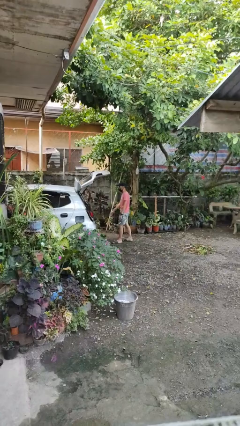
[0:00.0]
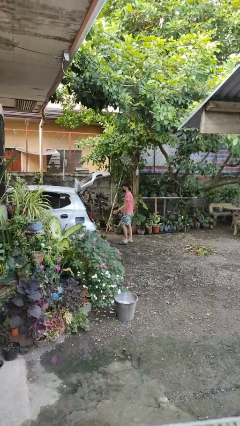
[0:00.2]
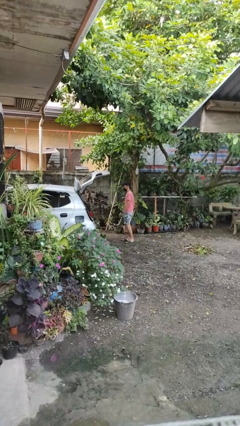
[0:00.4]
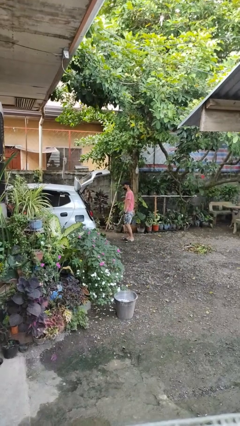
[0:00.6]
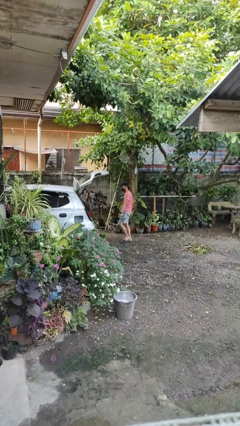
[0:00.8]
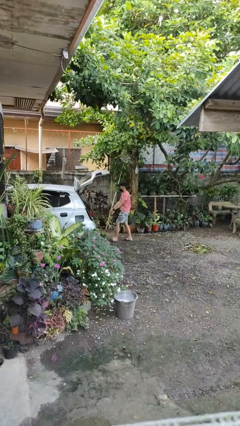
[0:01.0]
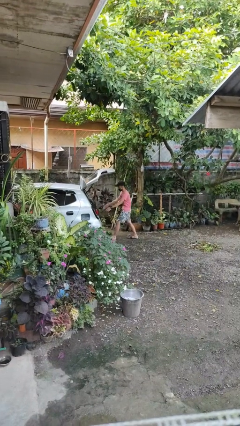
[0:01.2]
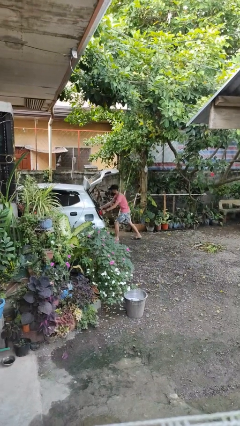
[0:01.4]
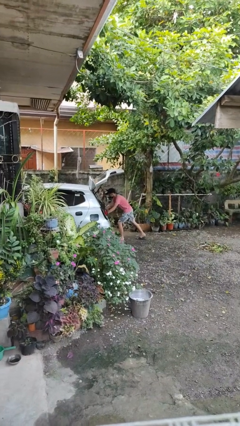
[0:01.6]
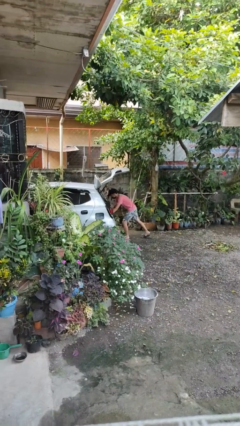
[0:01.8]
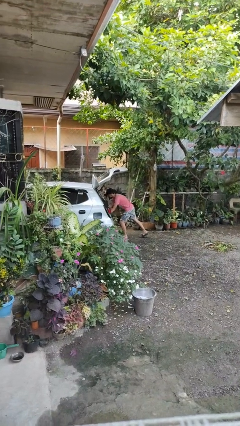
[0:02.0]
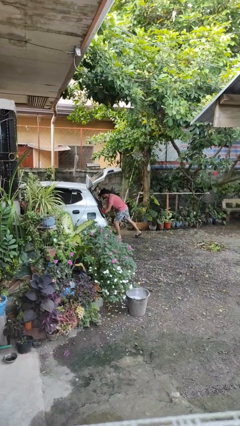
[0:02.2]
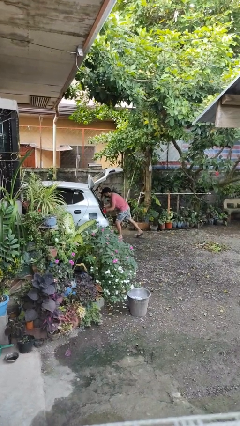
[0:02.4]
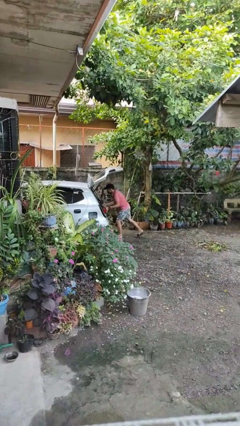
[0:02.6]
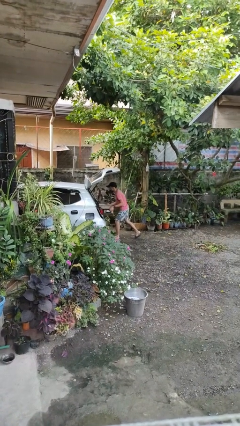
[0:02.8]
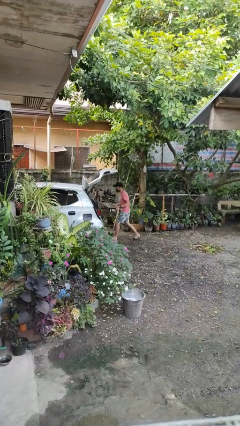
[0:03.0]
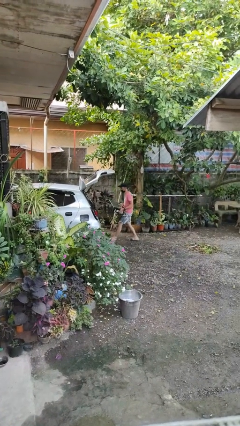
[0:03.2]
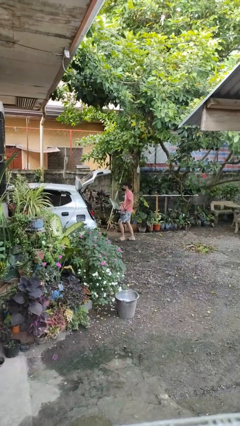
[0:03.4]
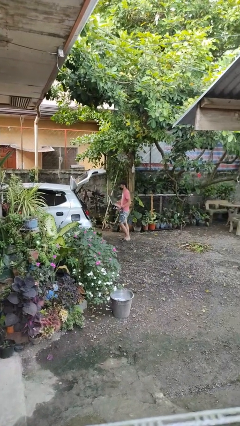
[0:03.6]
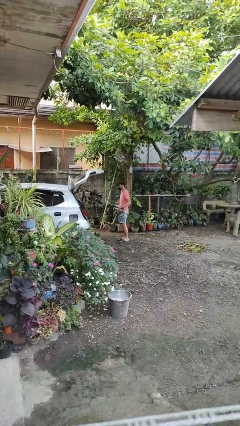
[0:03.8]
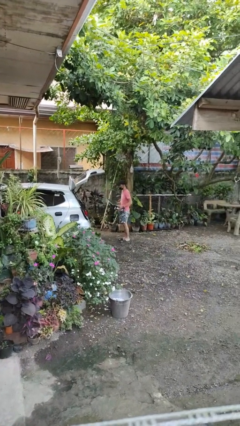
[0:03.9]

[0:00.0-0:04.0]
person unloads car

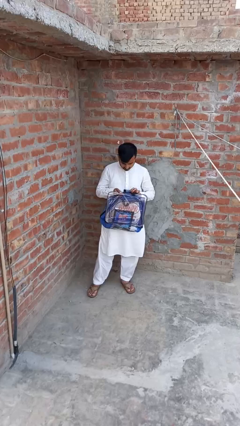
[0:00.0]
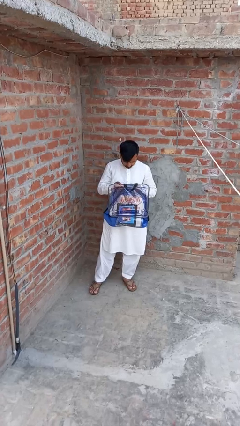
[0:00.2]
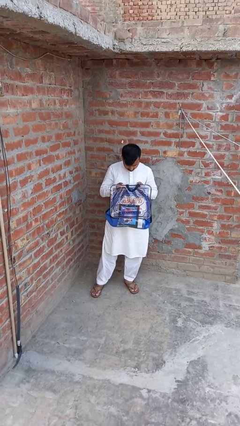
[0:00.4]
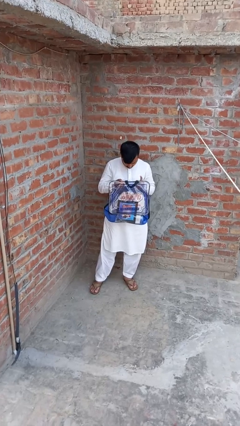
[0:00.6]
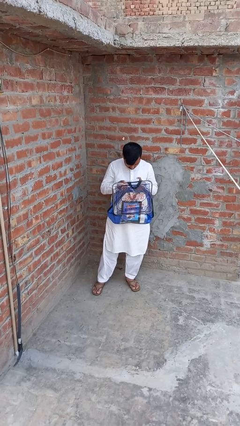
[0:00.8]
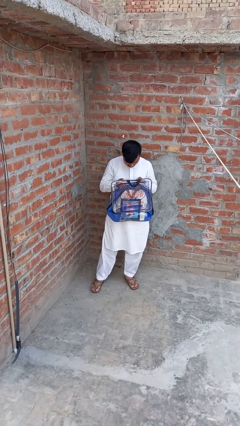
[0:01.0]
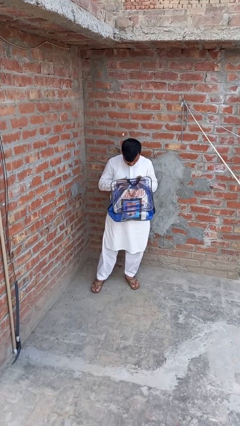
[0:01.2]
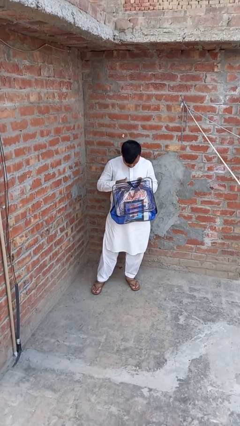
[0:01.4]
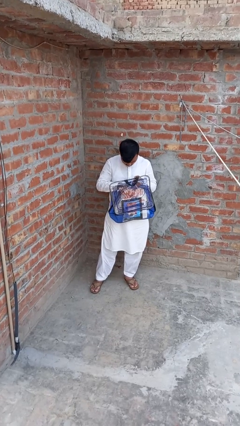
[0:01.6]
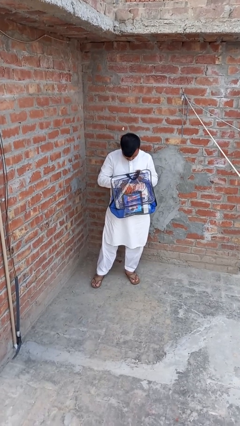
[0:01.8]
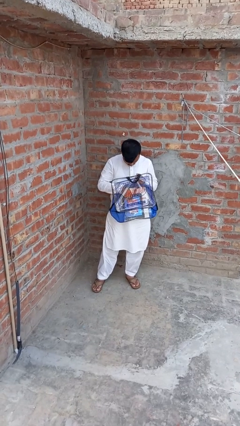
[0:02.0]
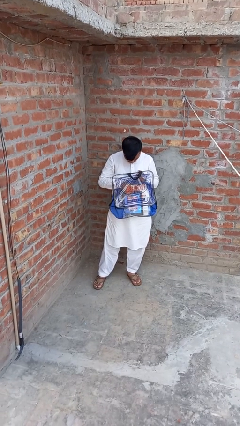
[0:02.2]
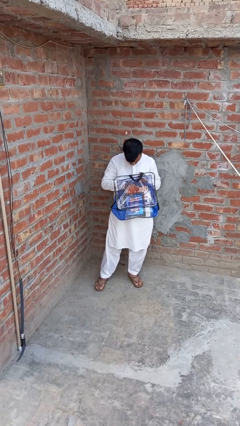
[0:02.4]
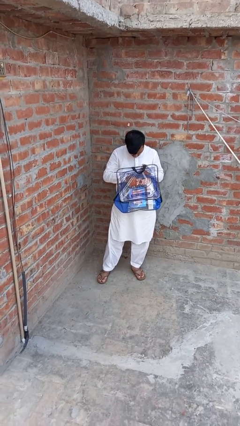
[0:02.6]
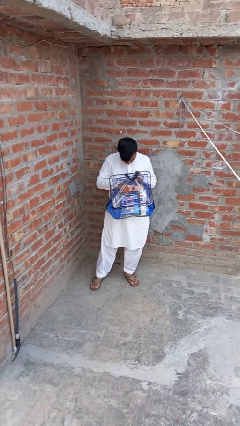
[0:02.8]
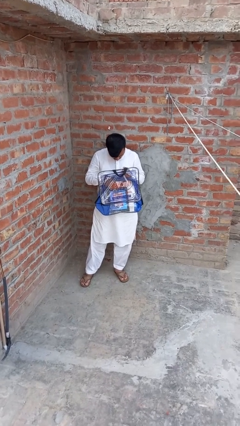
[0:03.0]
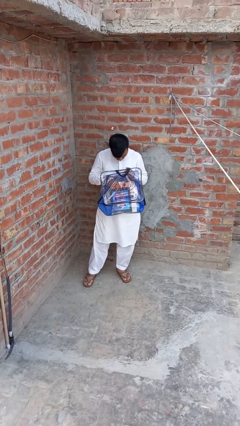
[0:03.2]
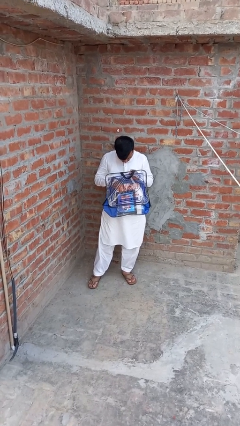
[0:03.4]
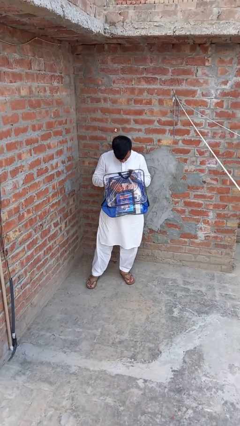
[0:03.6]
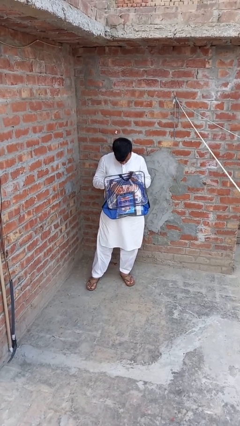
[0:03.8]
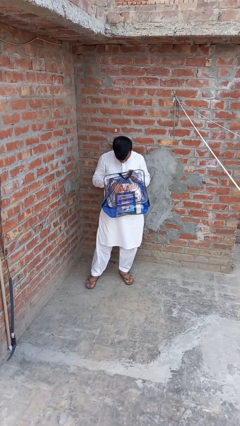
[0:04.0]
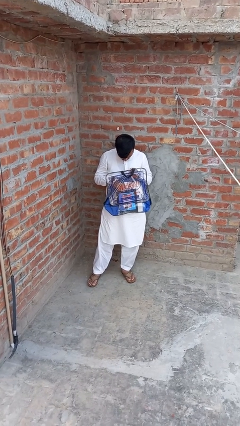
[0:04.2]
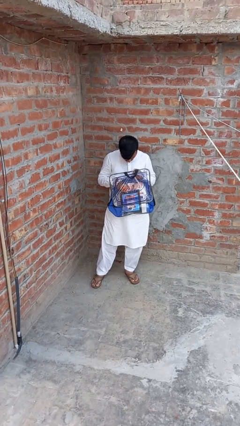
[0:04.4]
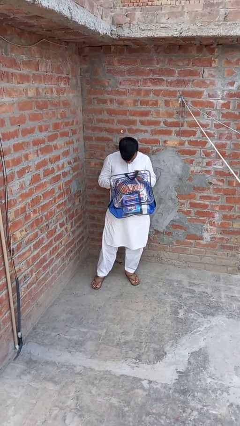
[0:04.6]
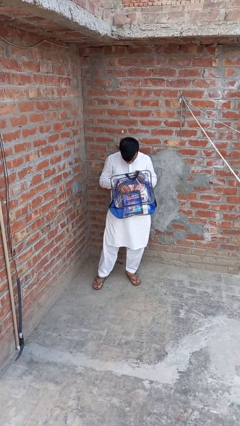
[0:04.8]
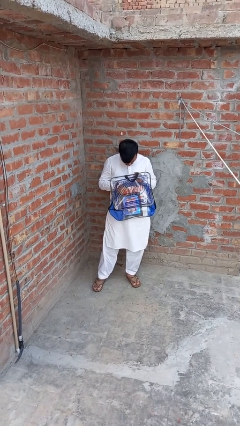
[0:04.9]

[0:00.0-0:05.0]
person searches in backpack

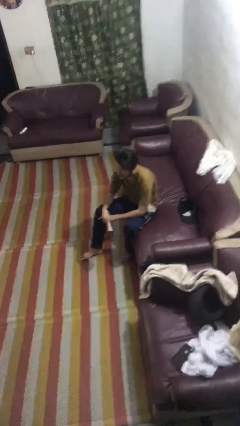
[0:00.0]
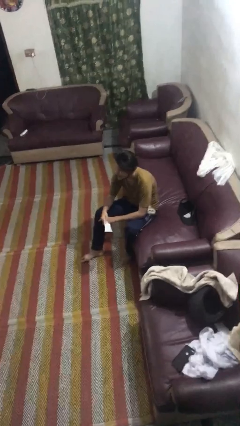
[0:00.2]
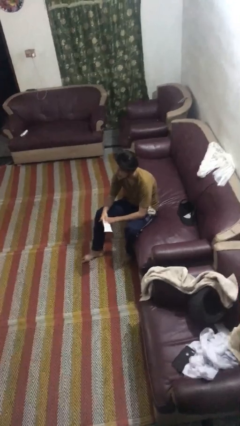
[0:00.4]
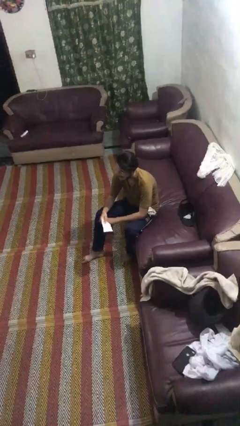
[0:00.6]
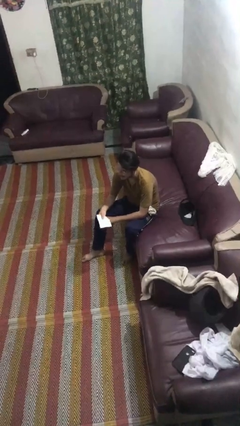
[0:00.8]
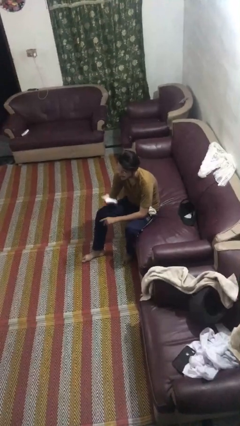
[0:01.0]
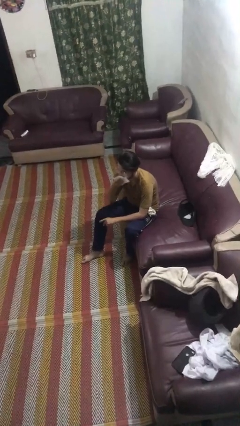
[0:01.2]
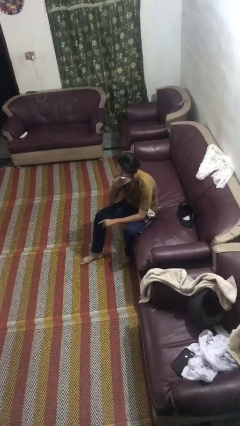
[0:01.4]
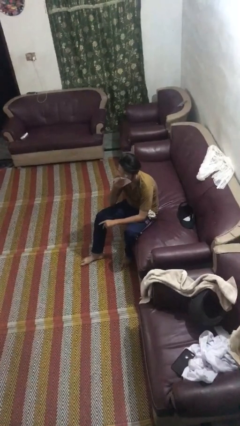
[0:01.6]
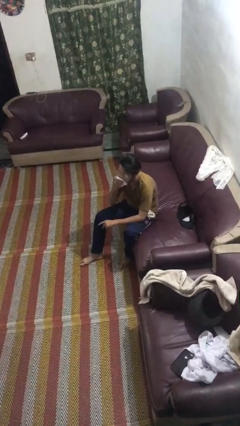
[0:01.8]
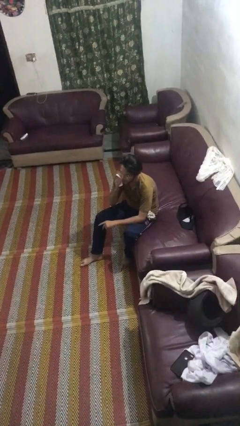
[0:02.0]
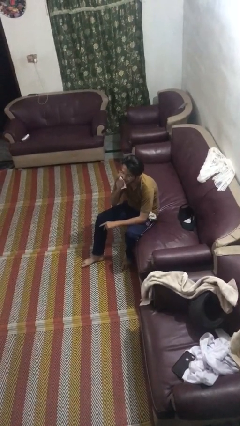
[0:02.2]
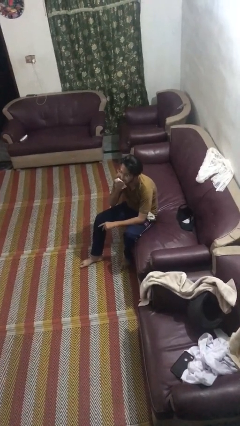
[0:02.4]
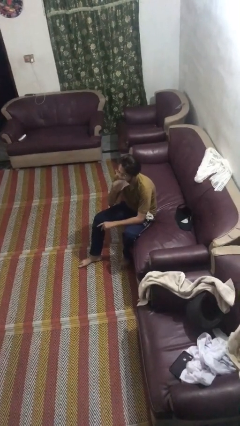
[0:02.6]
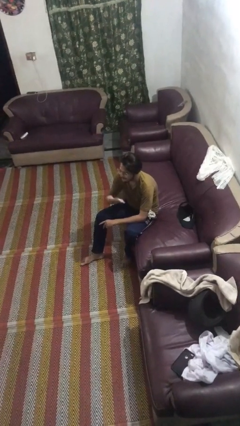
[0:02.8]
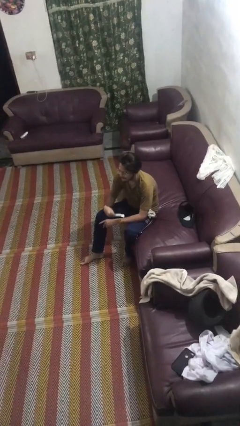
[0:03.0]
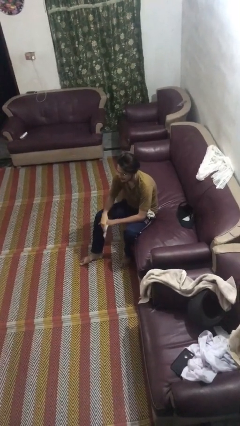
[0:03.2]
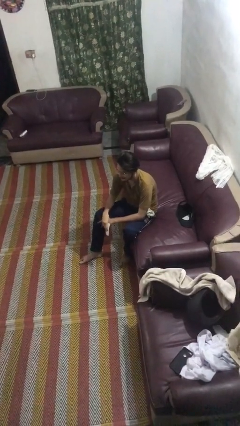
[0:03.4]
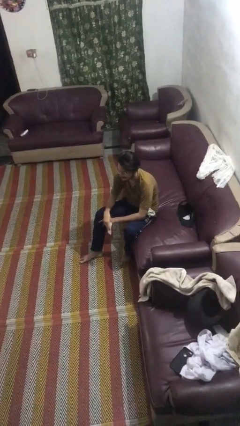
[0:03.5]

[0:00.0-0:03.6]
person wipes mouth with napkin

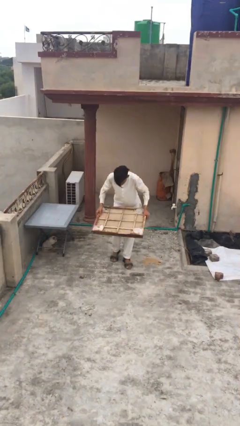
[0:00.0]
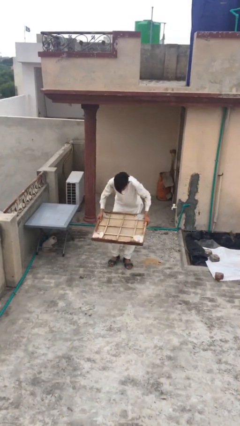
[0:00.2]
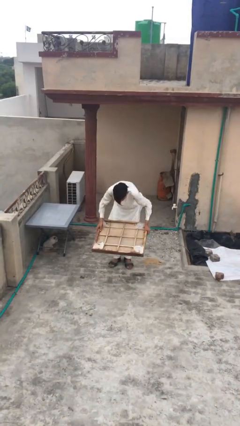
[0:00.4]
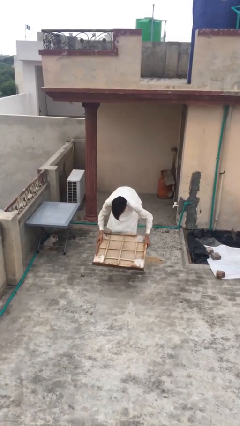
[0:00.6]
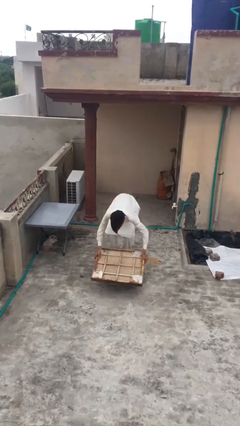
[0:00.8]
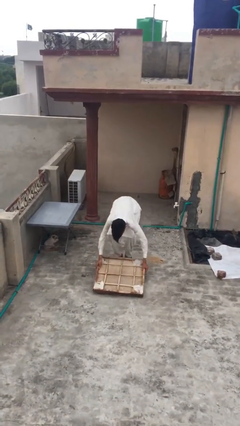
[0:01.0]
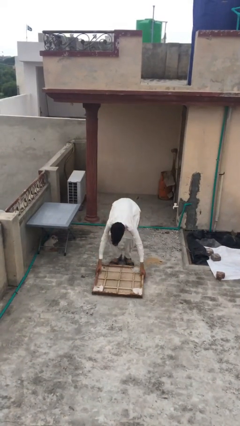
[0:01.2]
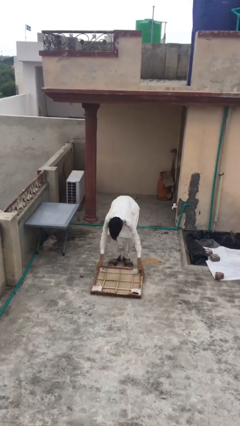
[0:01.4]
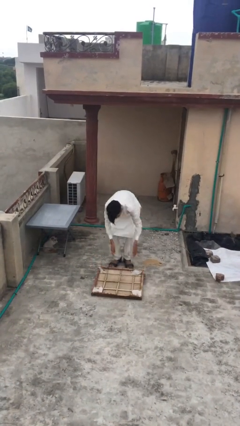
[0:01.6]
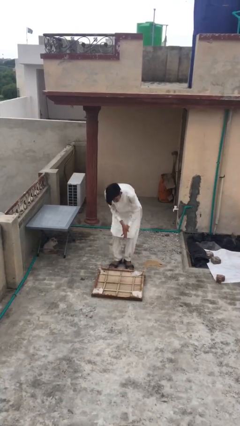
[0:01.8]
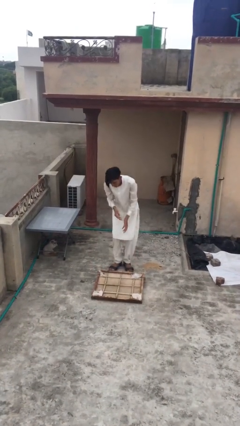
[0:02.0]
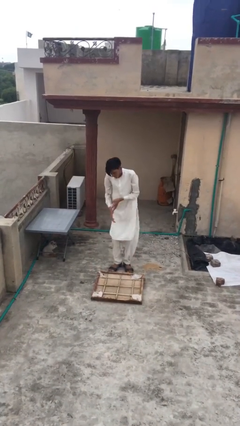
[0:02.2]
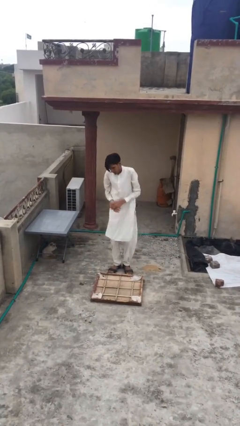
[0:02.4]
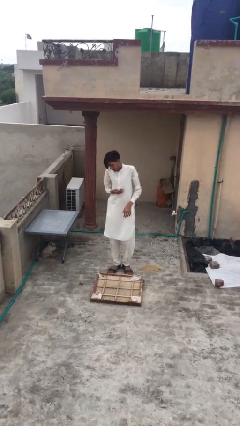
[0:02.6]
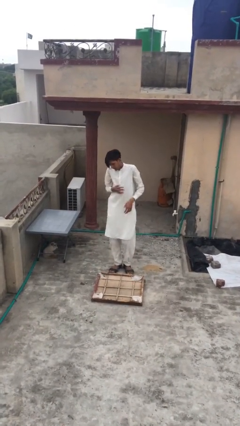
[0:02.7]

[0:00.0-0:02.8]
person puts down object on floor

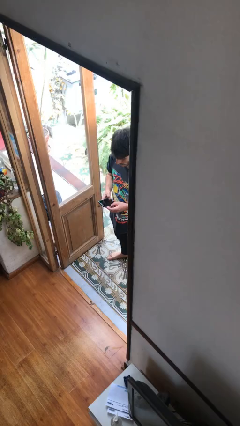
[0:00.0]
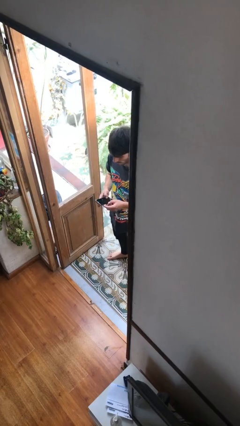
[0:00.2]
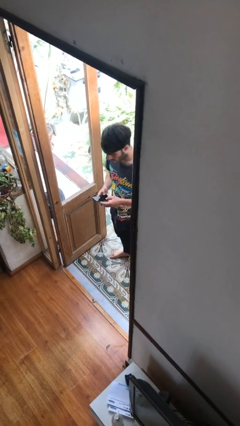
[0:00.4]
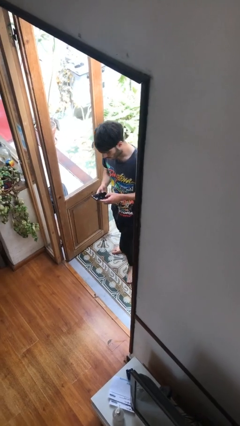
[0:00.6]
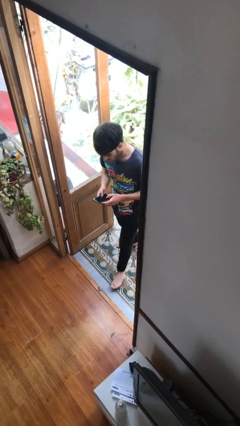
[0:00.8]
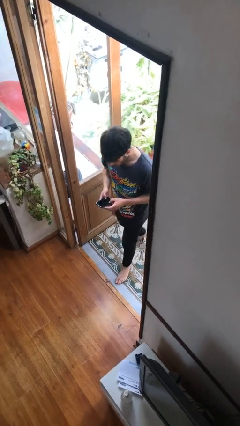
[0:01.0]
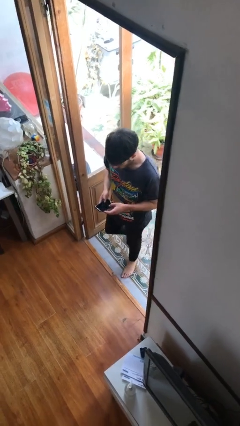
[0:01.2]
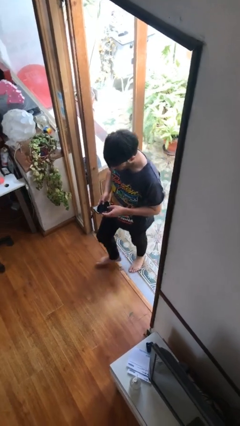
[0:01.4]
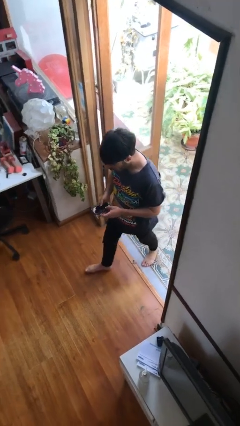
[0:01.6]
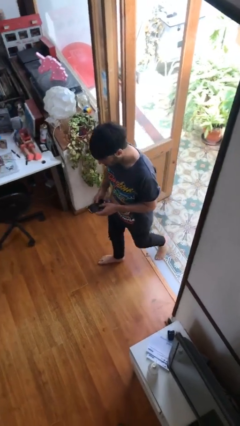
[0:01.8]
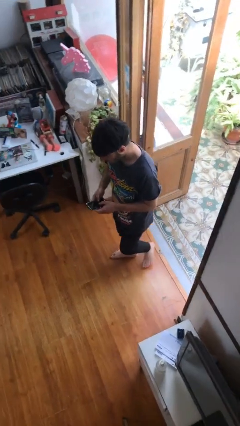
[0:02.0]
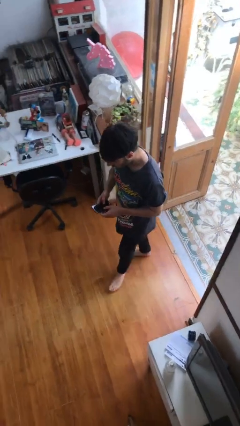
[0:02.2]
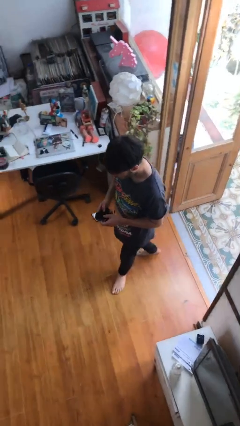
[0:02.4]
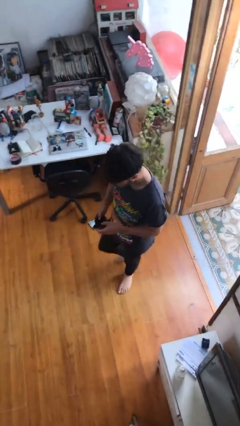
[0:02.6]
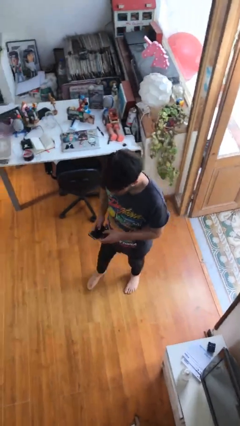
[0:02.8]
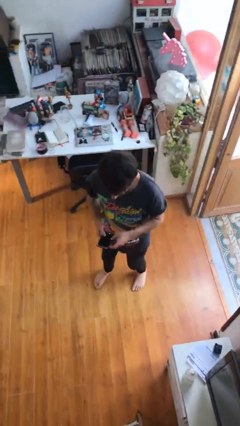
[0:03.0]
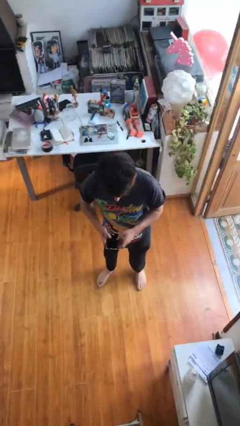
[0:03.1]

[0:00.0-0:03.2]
person enters scene through structure
